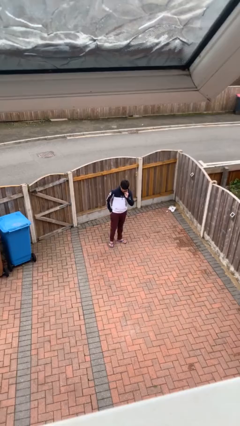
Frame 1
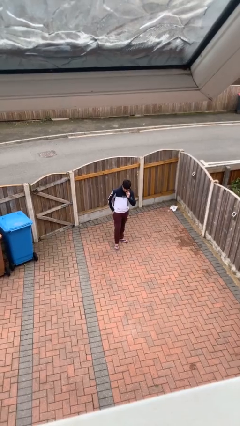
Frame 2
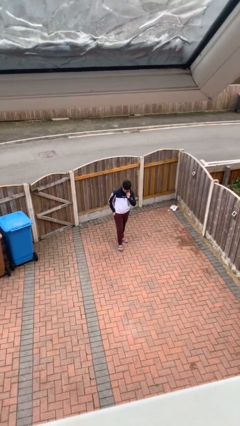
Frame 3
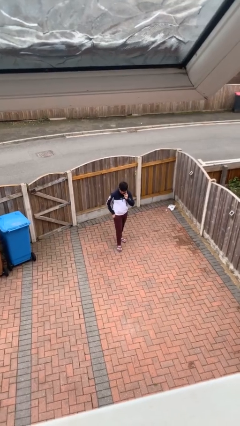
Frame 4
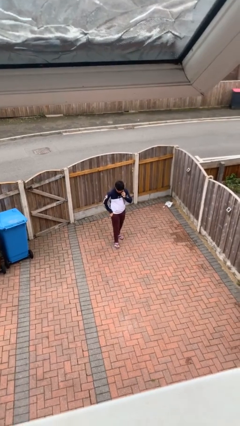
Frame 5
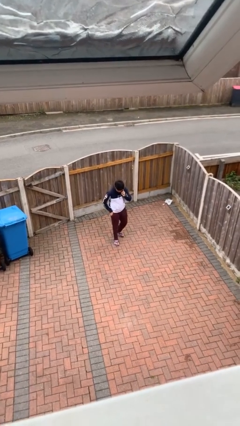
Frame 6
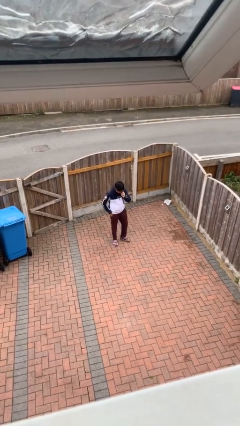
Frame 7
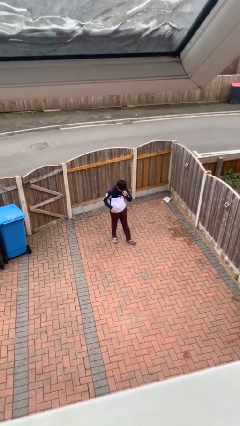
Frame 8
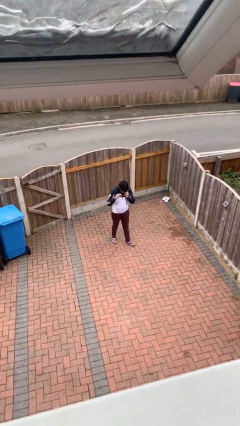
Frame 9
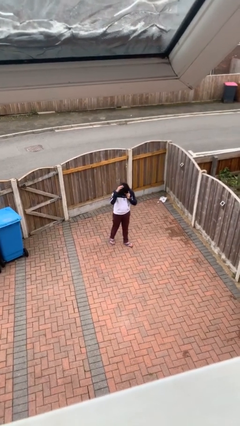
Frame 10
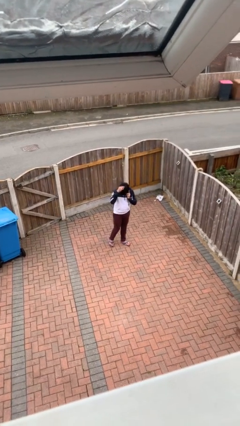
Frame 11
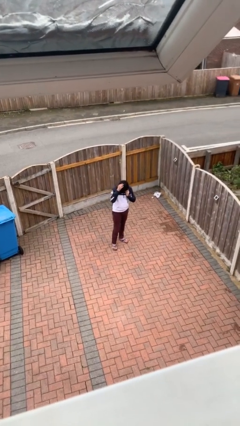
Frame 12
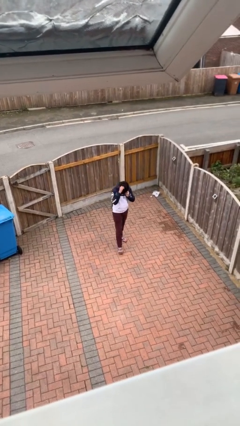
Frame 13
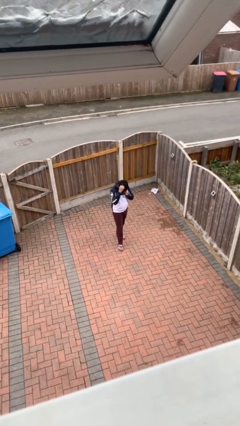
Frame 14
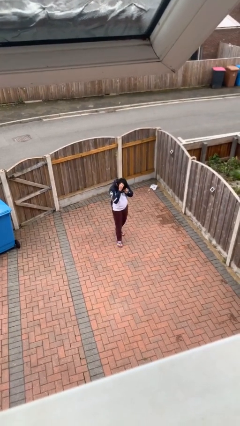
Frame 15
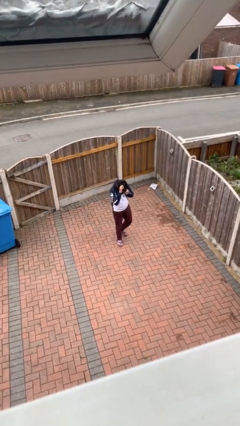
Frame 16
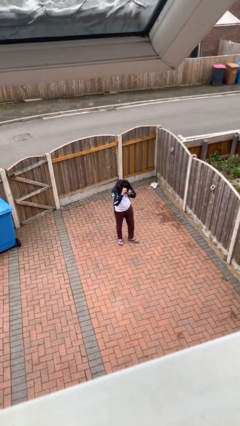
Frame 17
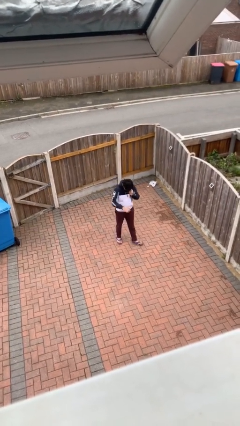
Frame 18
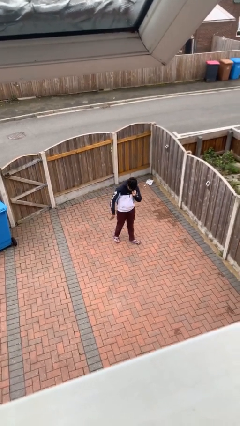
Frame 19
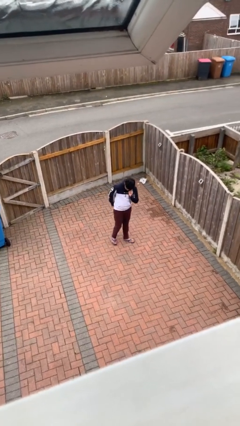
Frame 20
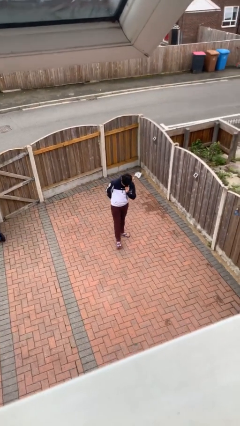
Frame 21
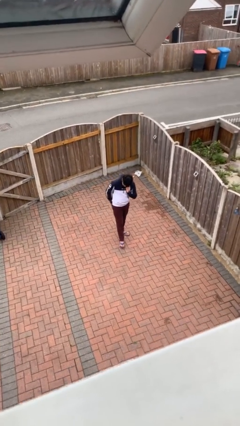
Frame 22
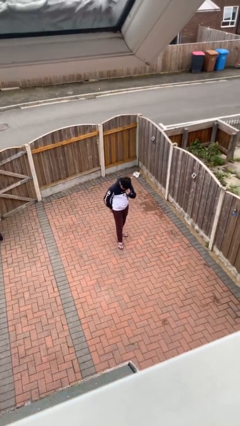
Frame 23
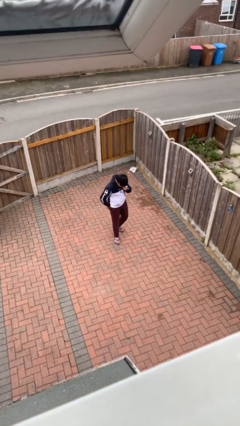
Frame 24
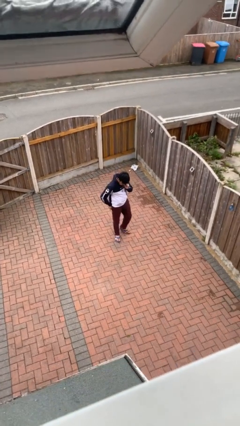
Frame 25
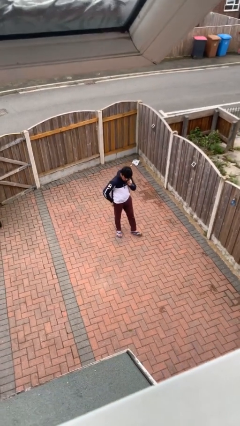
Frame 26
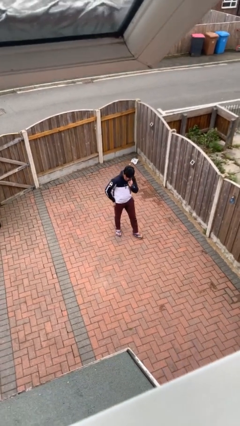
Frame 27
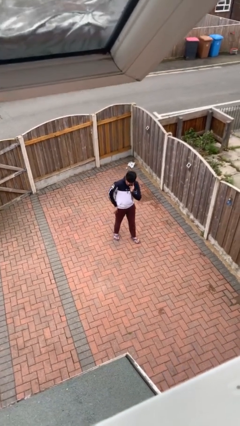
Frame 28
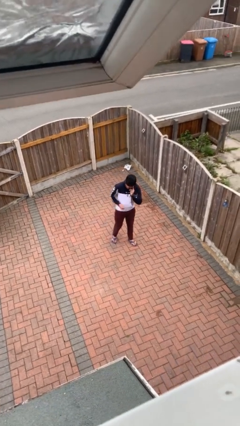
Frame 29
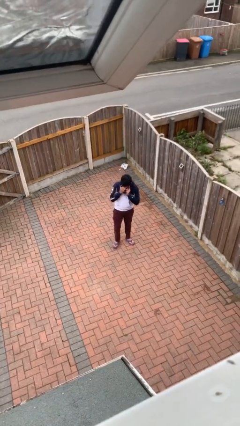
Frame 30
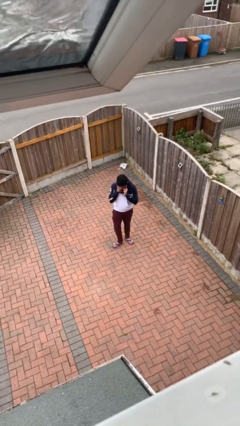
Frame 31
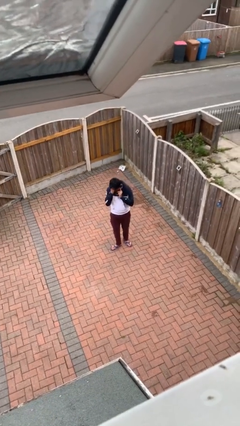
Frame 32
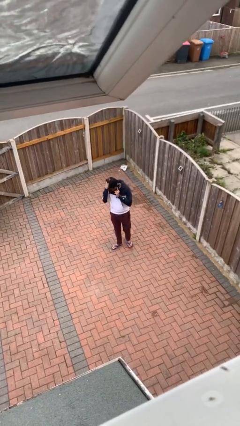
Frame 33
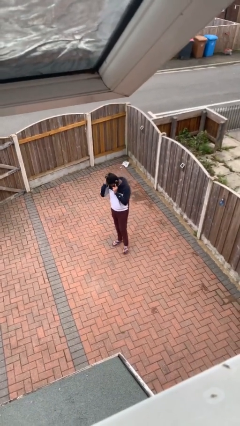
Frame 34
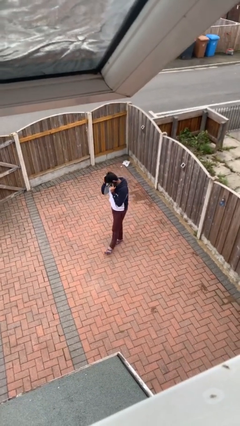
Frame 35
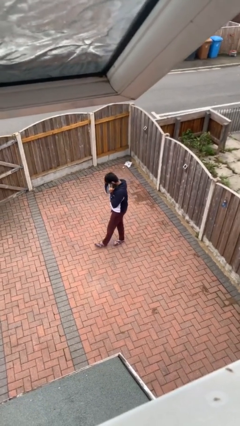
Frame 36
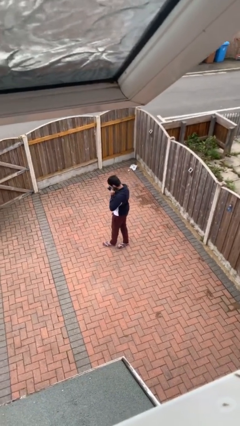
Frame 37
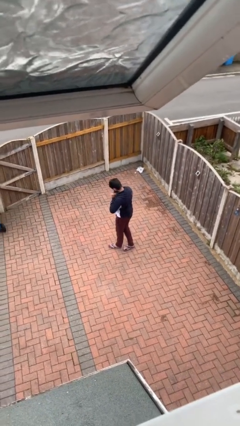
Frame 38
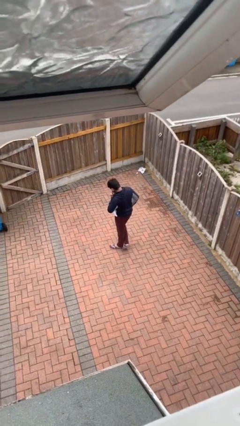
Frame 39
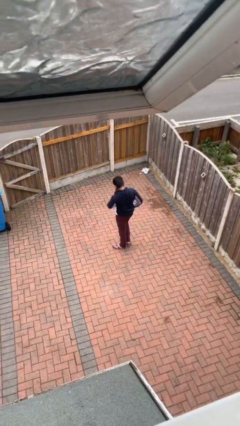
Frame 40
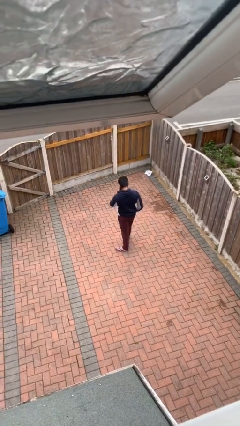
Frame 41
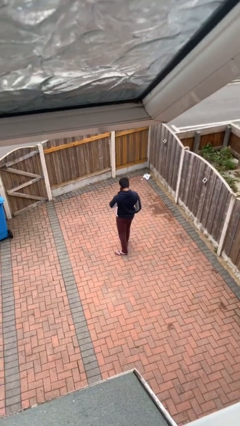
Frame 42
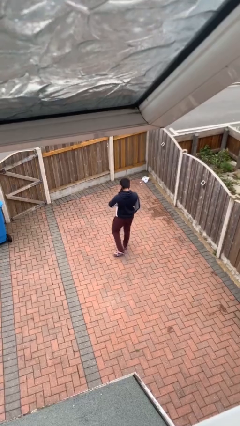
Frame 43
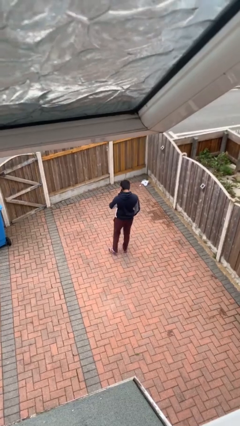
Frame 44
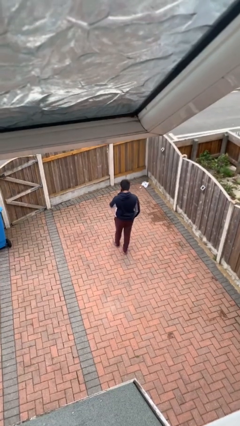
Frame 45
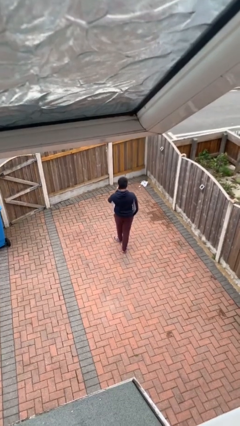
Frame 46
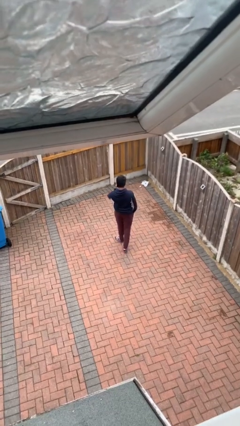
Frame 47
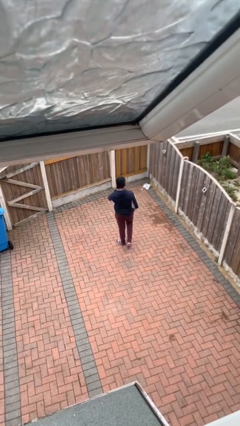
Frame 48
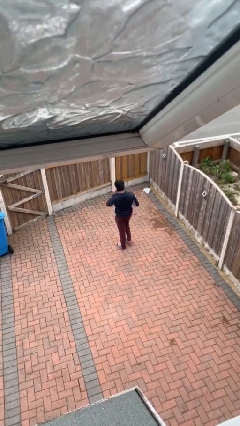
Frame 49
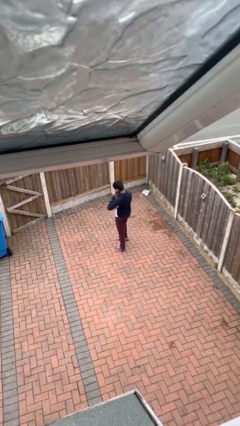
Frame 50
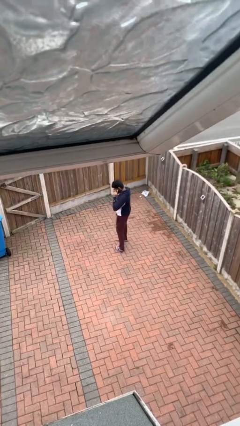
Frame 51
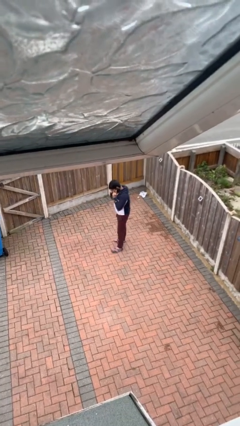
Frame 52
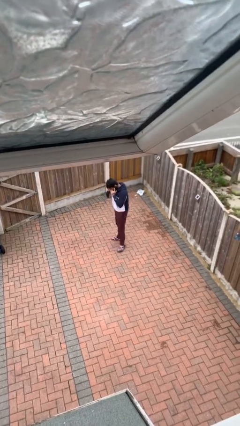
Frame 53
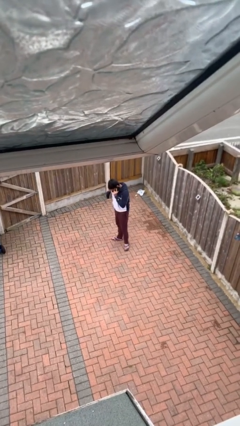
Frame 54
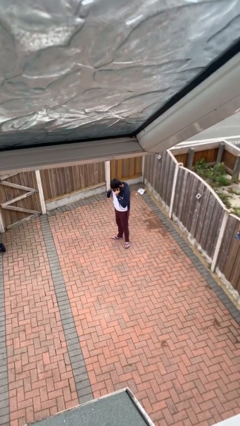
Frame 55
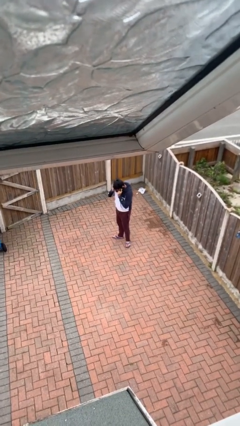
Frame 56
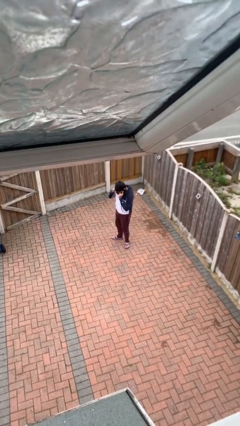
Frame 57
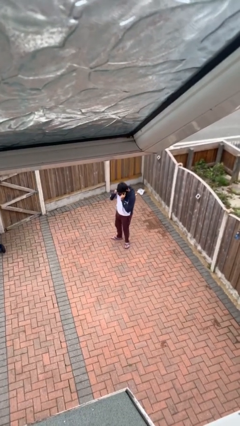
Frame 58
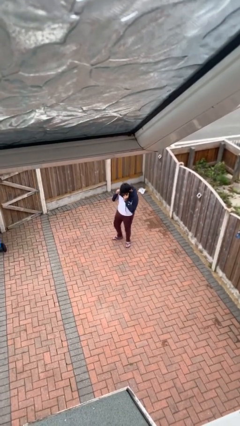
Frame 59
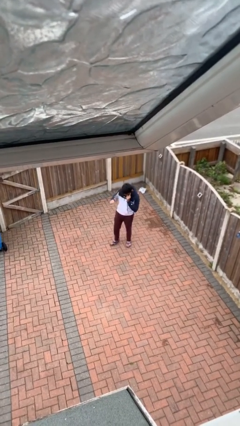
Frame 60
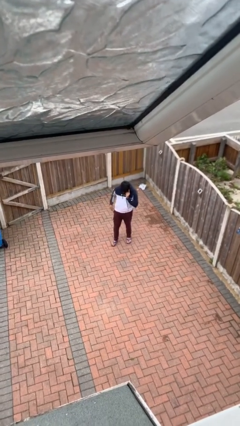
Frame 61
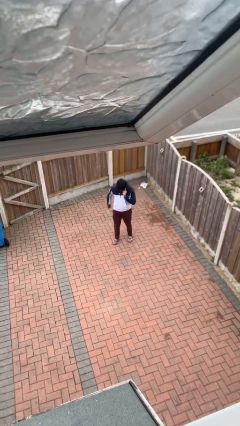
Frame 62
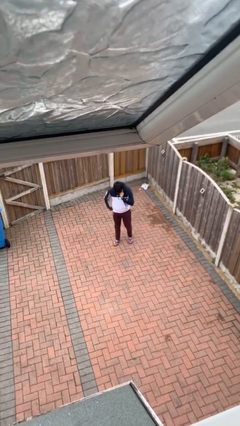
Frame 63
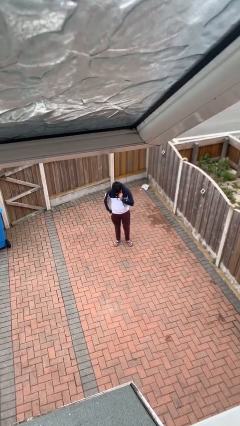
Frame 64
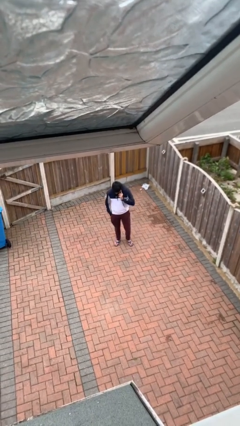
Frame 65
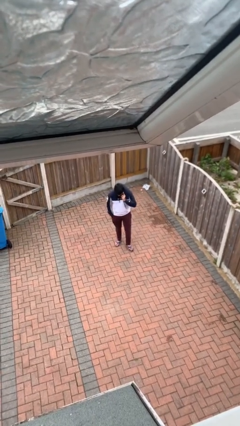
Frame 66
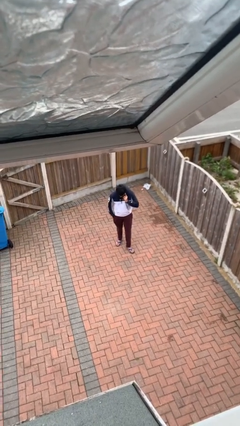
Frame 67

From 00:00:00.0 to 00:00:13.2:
person talks on phone

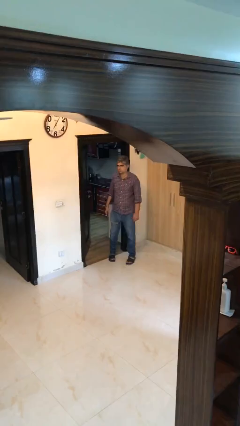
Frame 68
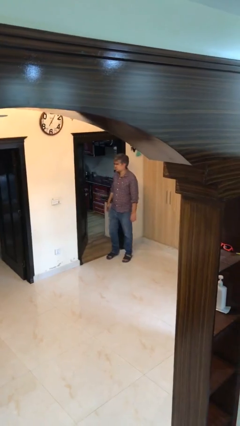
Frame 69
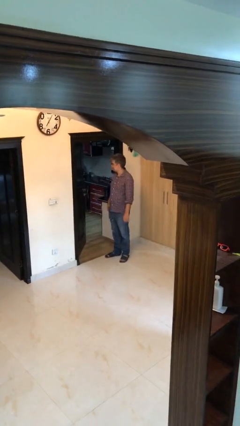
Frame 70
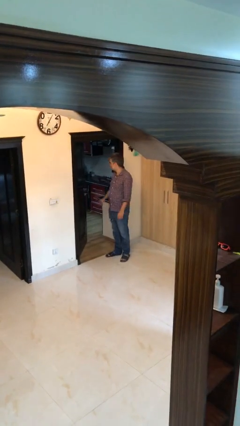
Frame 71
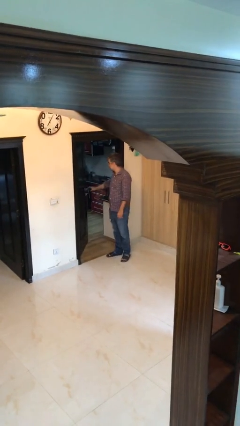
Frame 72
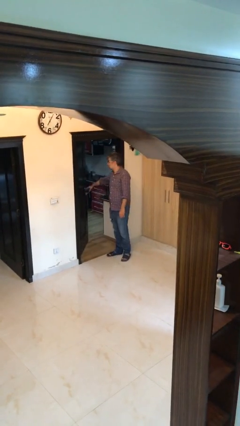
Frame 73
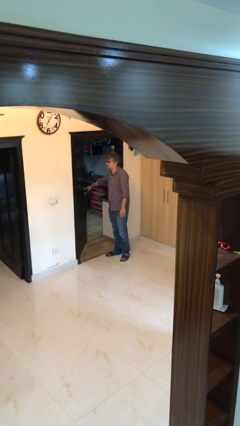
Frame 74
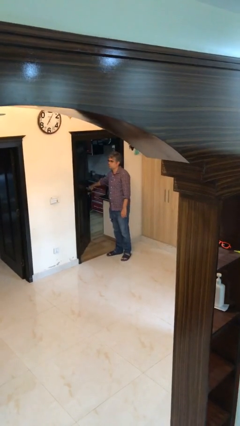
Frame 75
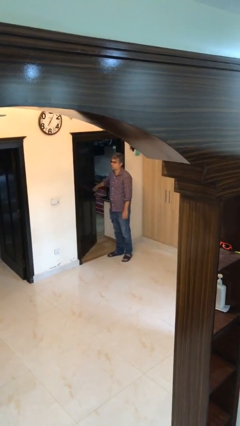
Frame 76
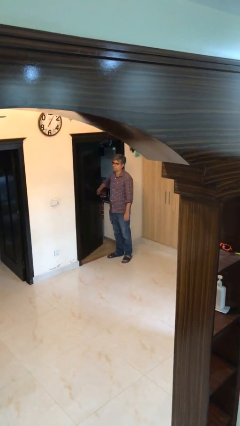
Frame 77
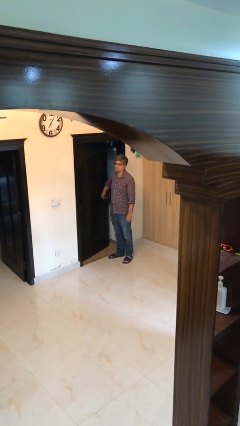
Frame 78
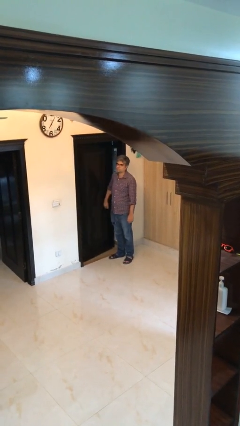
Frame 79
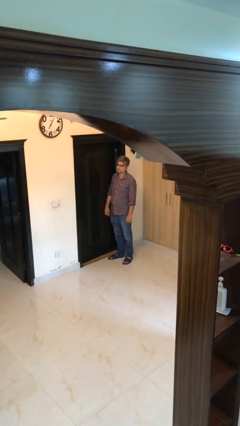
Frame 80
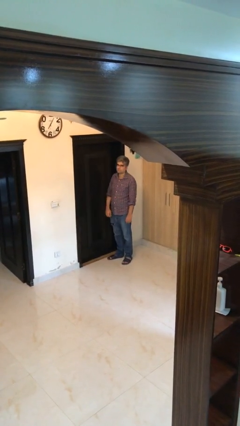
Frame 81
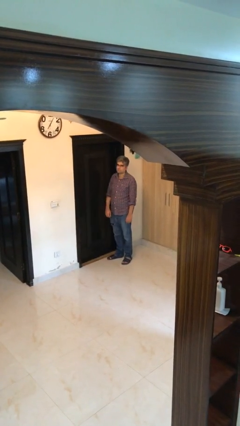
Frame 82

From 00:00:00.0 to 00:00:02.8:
person closes facility door

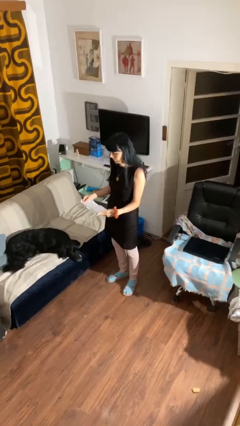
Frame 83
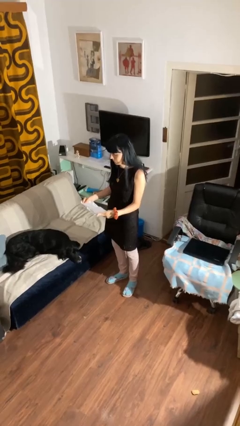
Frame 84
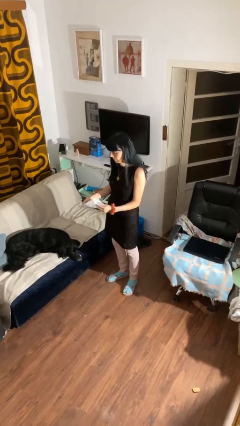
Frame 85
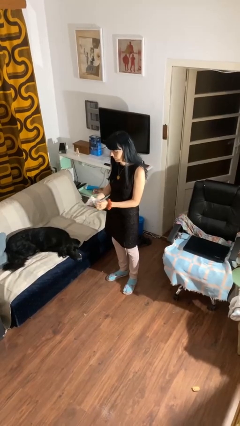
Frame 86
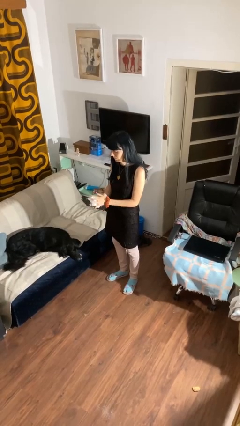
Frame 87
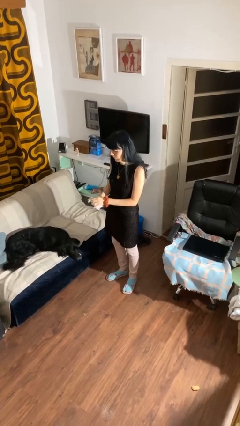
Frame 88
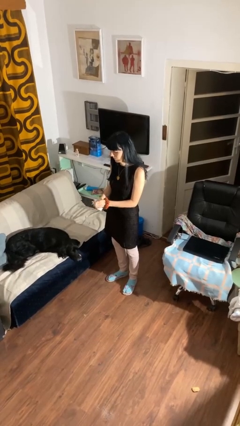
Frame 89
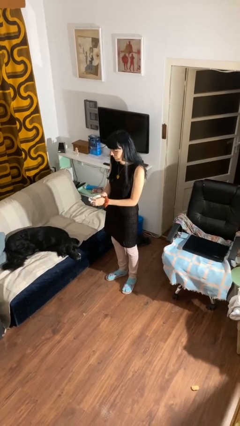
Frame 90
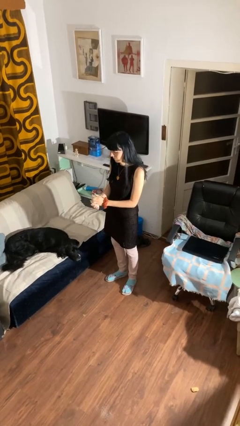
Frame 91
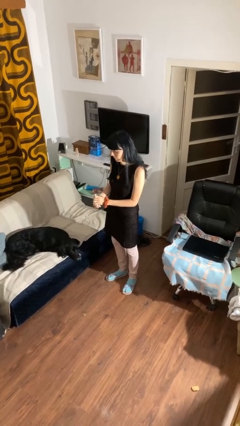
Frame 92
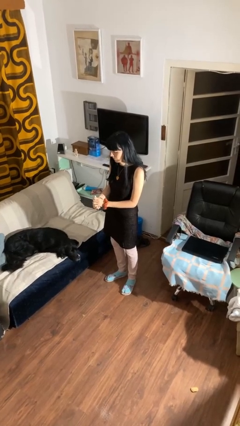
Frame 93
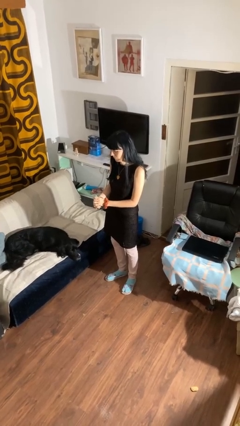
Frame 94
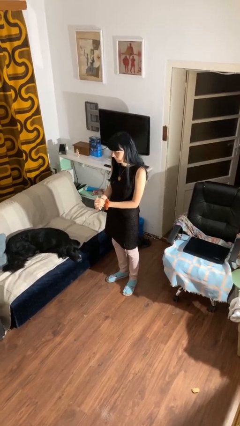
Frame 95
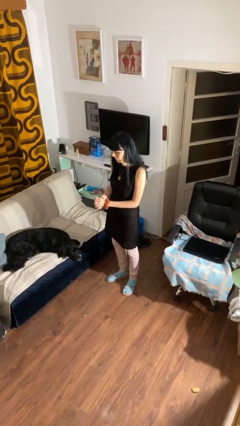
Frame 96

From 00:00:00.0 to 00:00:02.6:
person crumples paper
